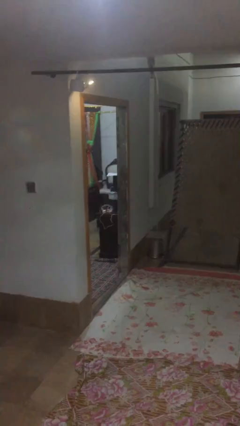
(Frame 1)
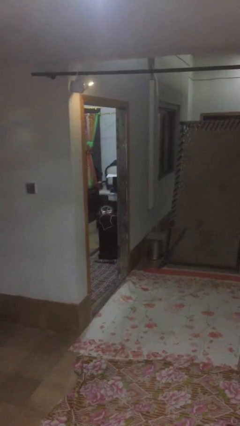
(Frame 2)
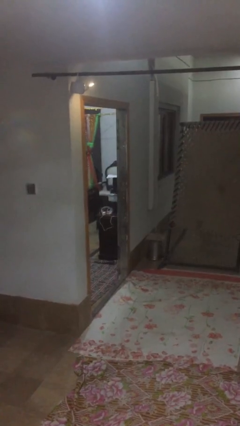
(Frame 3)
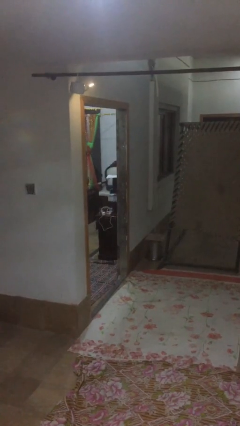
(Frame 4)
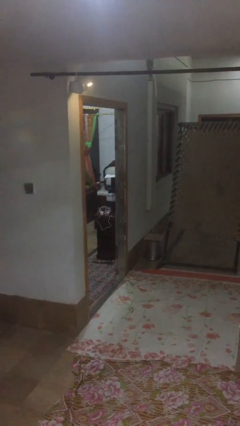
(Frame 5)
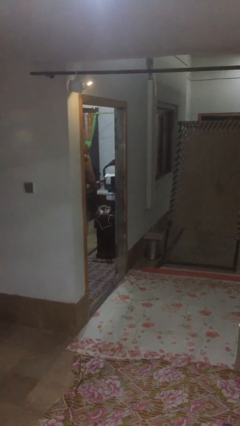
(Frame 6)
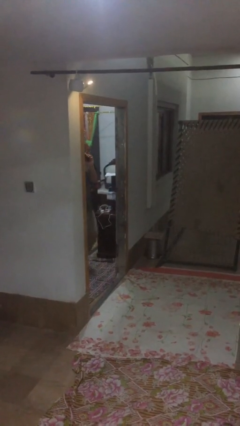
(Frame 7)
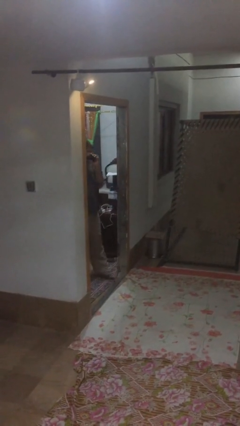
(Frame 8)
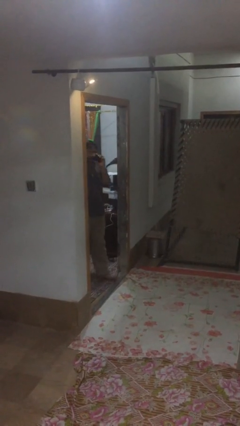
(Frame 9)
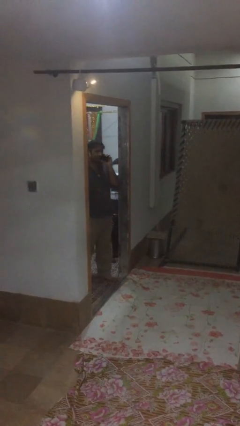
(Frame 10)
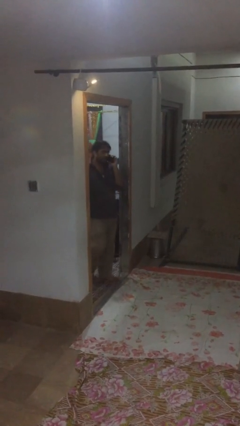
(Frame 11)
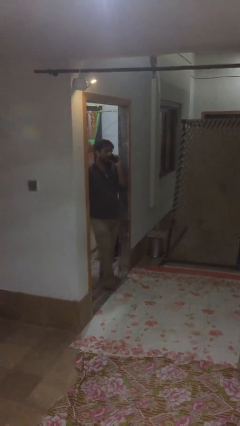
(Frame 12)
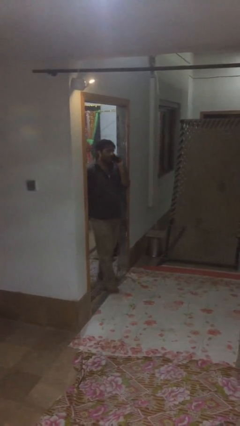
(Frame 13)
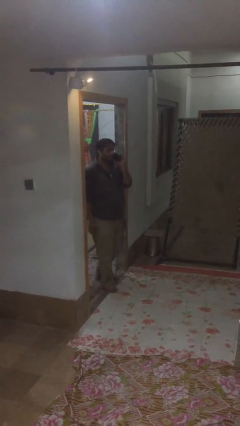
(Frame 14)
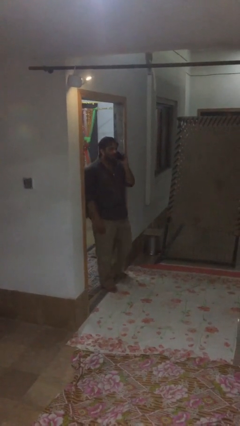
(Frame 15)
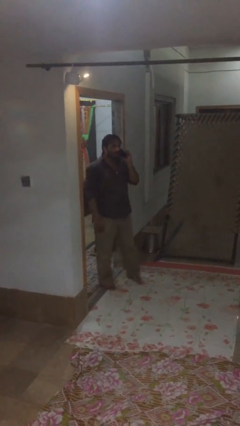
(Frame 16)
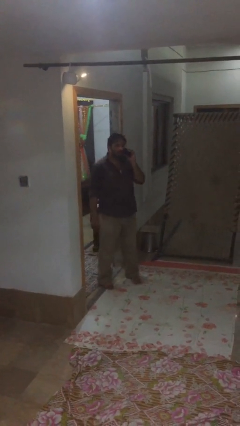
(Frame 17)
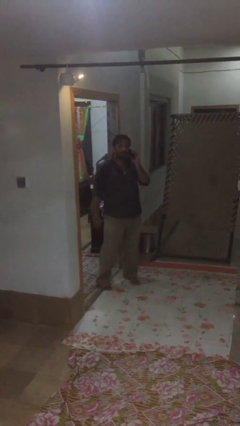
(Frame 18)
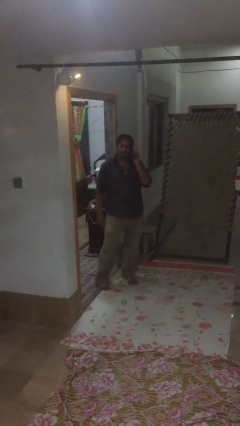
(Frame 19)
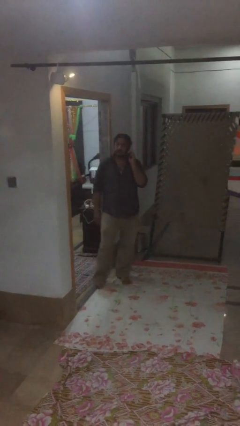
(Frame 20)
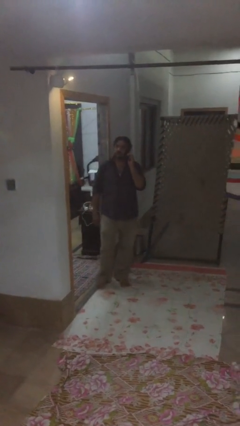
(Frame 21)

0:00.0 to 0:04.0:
person enters scene through structure

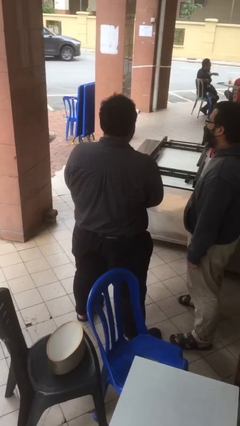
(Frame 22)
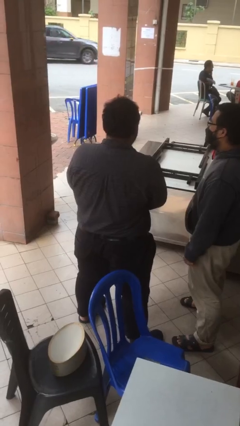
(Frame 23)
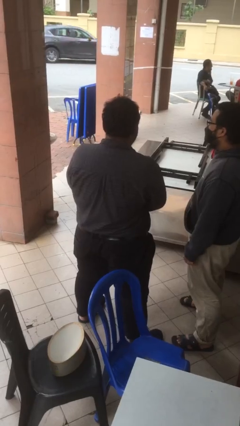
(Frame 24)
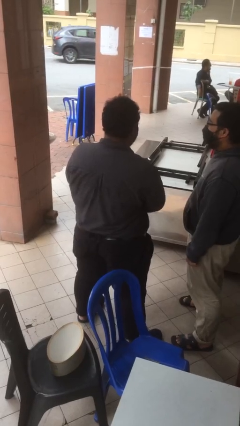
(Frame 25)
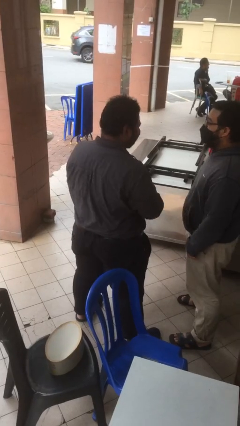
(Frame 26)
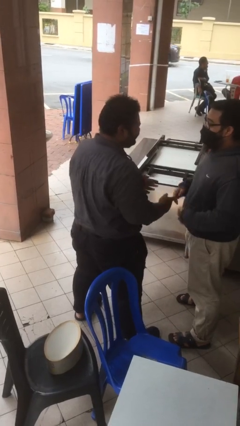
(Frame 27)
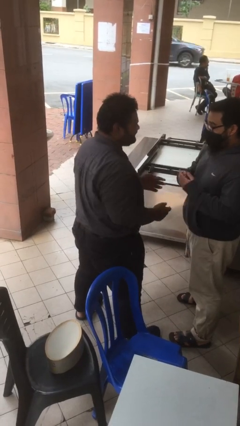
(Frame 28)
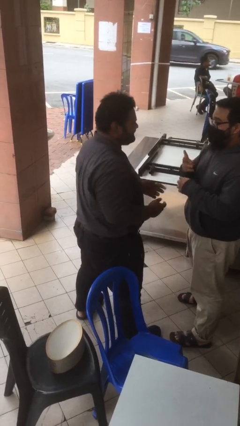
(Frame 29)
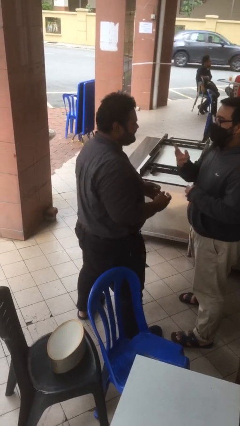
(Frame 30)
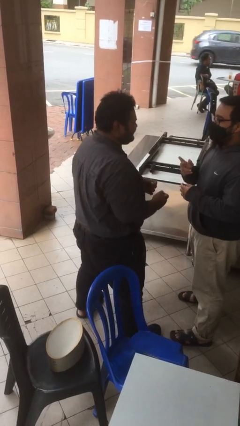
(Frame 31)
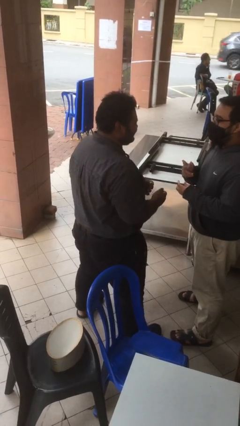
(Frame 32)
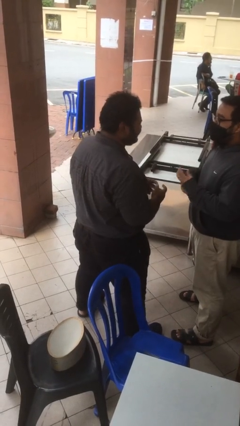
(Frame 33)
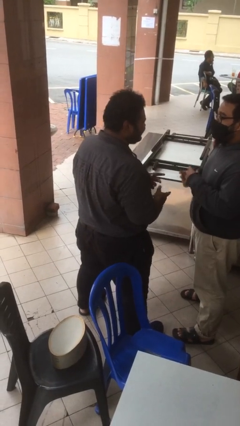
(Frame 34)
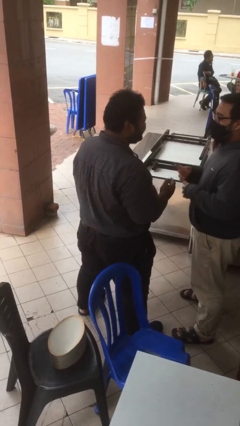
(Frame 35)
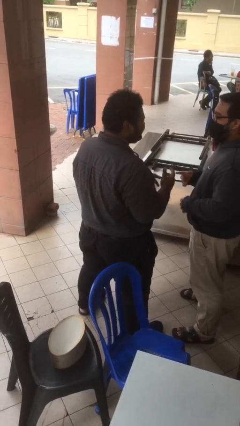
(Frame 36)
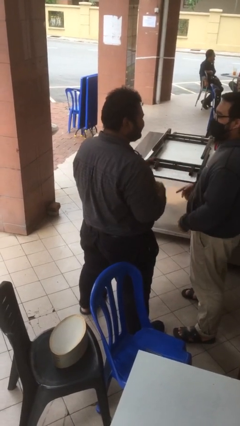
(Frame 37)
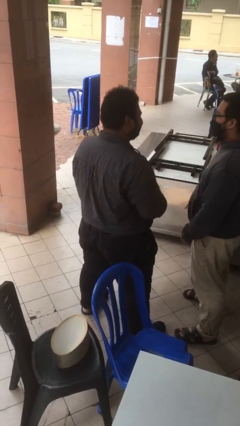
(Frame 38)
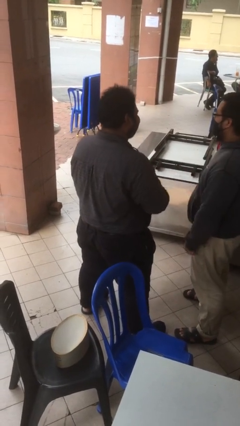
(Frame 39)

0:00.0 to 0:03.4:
person talks to person

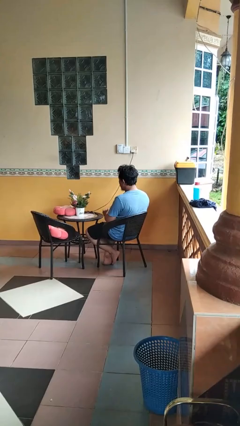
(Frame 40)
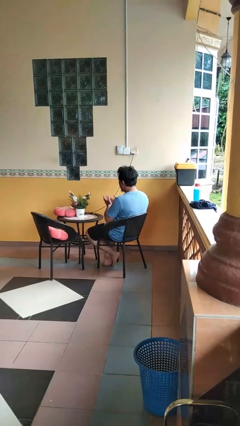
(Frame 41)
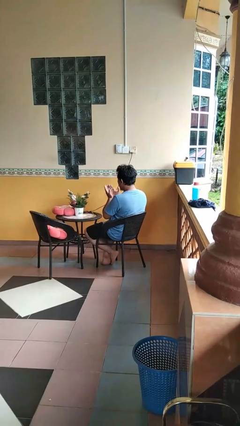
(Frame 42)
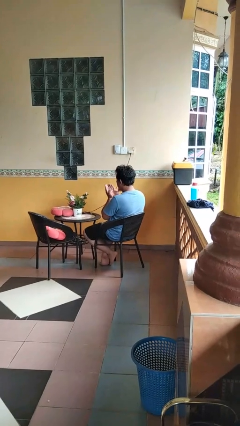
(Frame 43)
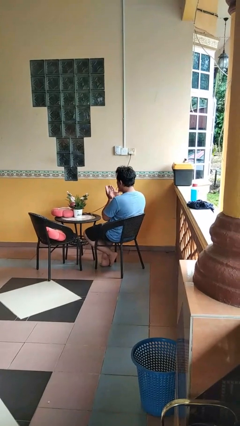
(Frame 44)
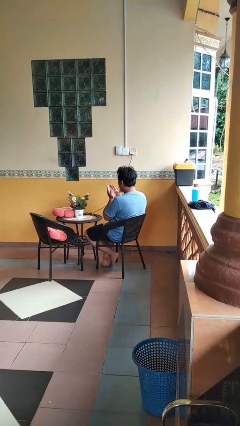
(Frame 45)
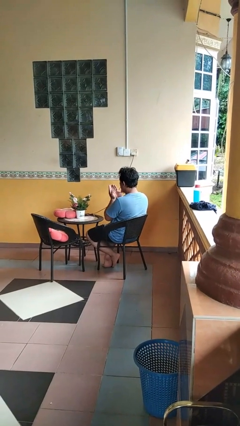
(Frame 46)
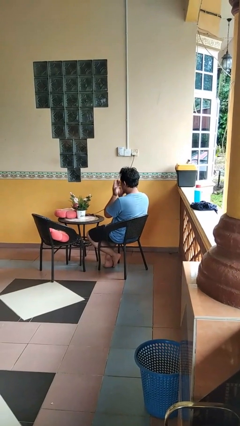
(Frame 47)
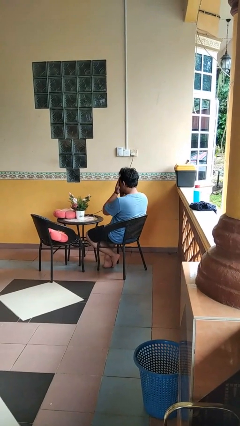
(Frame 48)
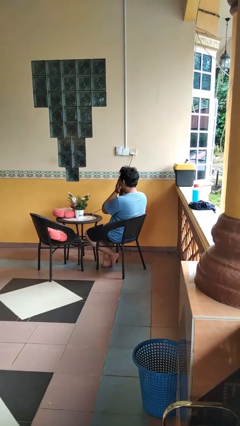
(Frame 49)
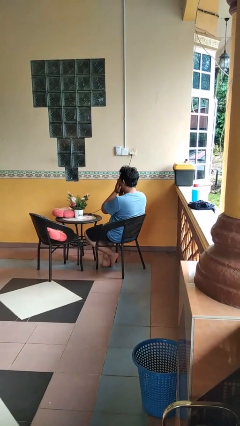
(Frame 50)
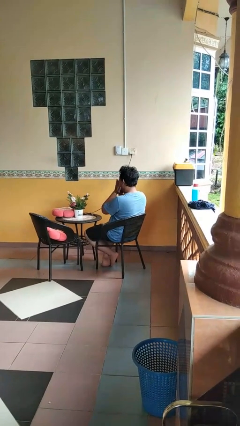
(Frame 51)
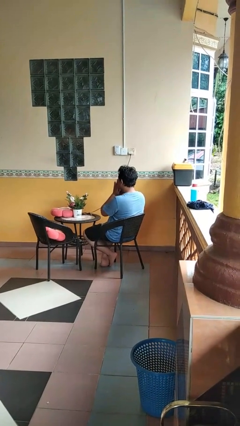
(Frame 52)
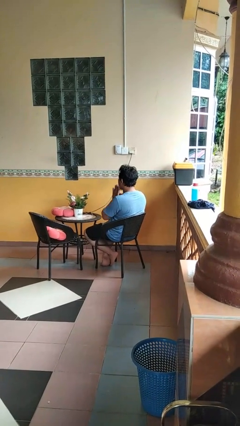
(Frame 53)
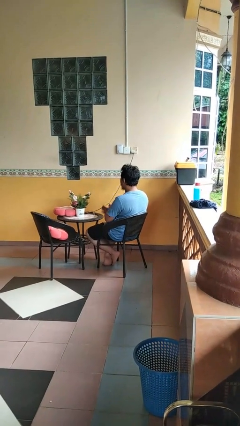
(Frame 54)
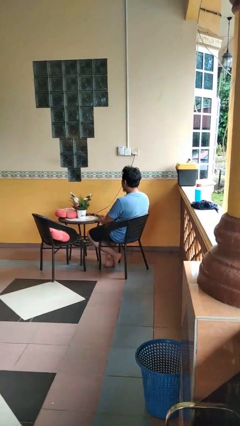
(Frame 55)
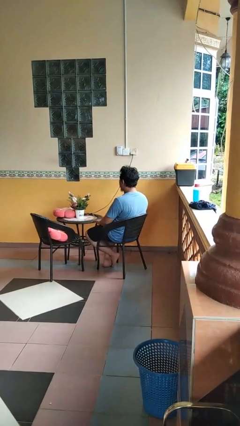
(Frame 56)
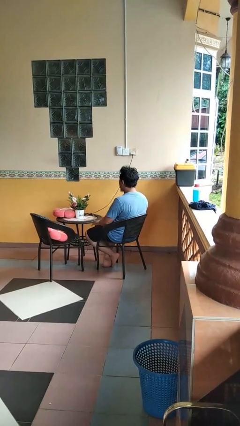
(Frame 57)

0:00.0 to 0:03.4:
person prays

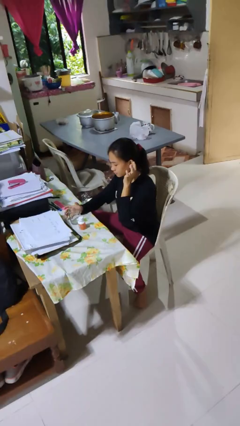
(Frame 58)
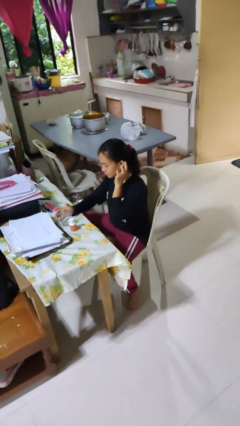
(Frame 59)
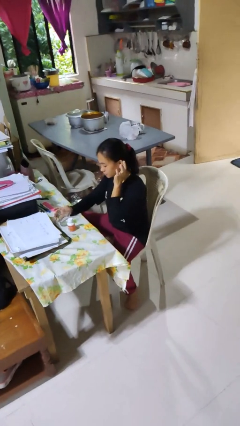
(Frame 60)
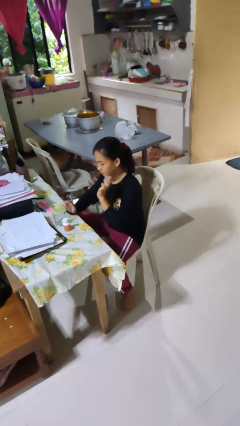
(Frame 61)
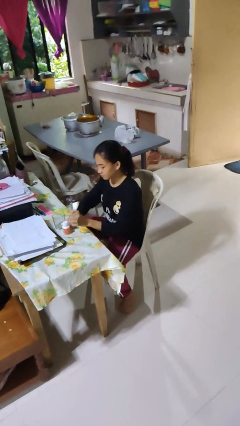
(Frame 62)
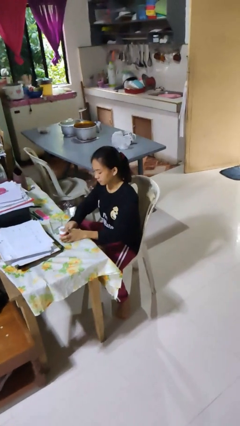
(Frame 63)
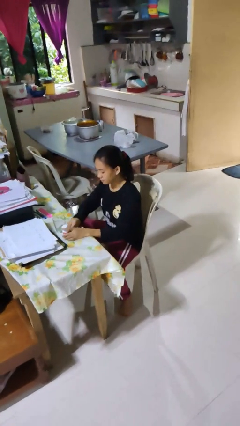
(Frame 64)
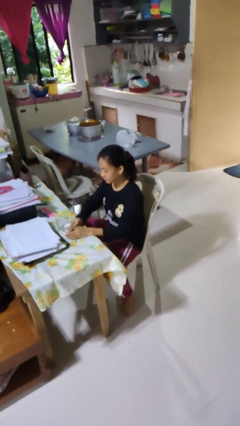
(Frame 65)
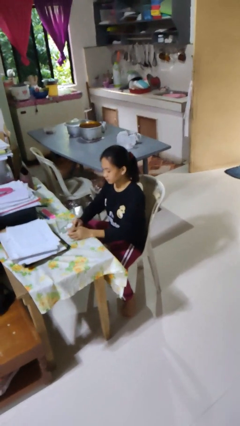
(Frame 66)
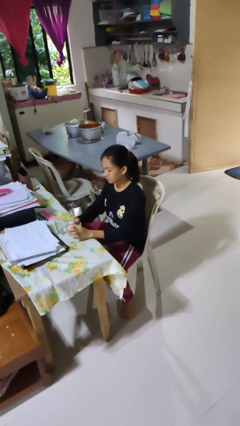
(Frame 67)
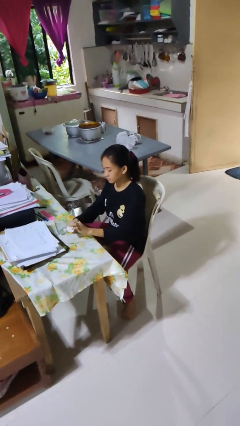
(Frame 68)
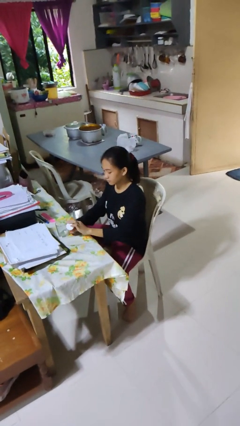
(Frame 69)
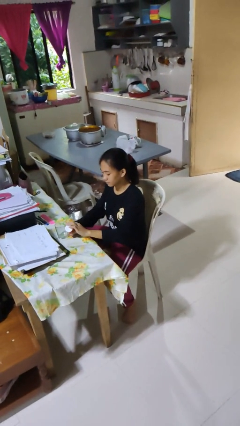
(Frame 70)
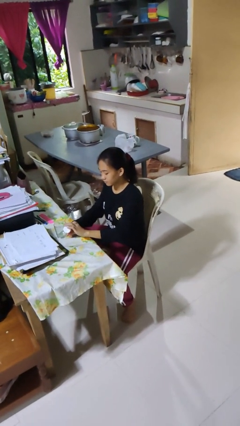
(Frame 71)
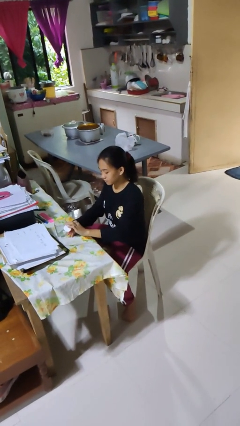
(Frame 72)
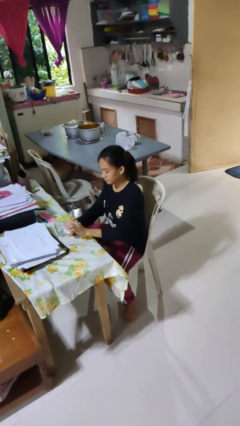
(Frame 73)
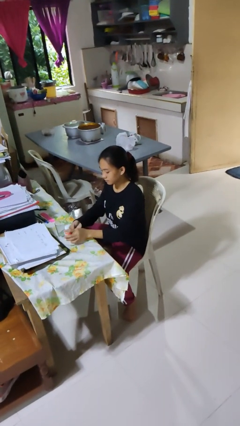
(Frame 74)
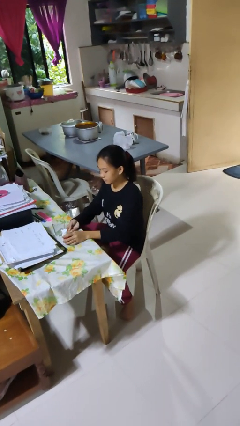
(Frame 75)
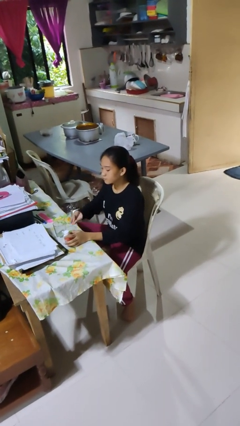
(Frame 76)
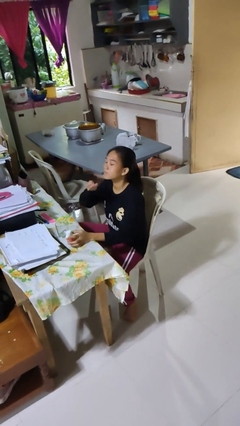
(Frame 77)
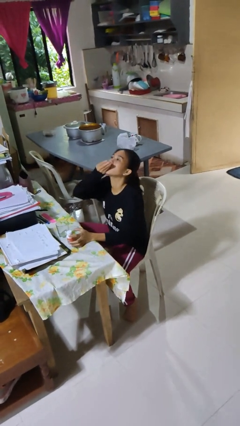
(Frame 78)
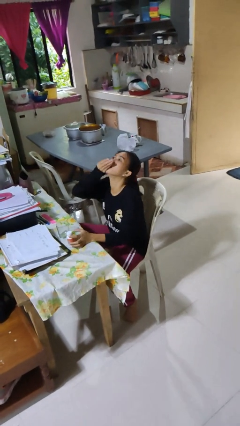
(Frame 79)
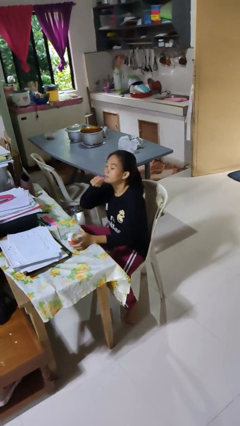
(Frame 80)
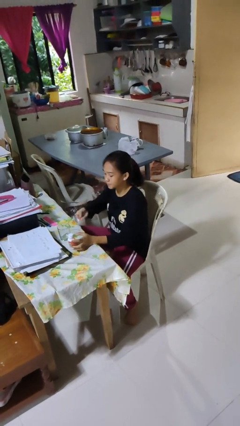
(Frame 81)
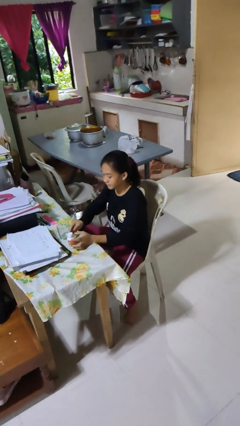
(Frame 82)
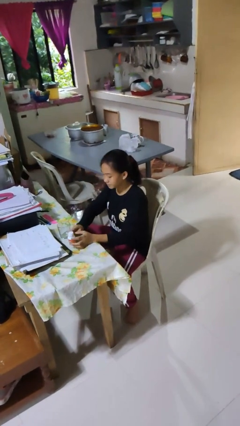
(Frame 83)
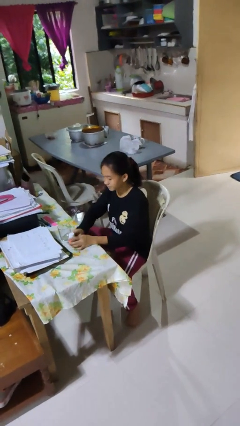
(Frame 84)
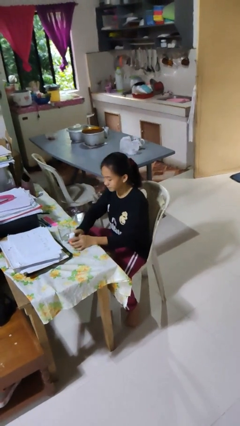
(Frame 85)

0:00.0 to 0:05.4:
person takes medicine pills

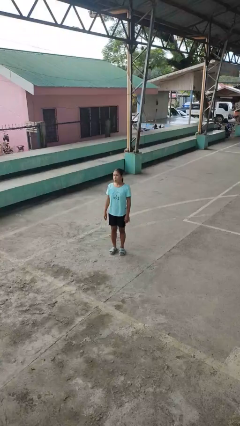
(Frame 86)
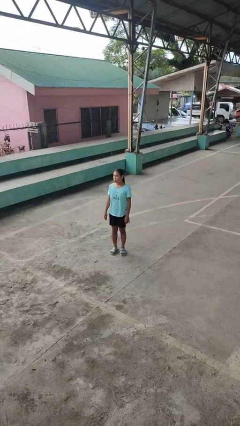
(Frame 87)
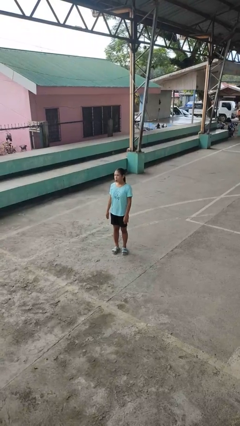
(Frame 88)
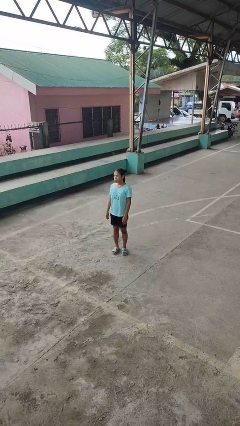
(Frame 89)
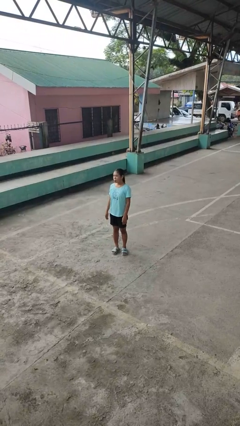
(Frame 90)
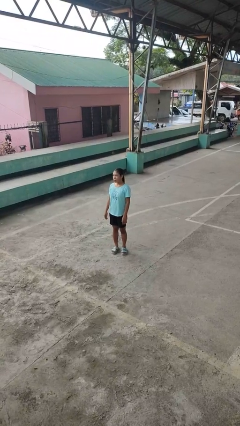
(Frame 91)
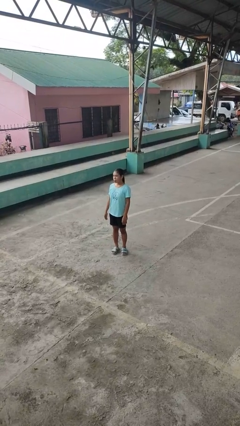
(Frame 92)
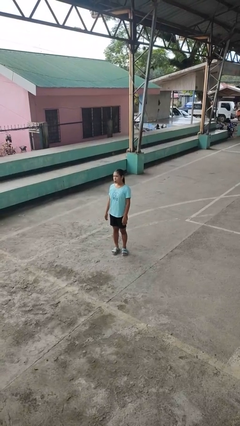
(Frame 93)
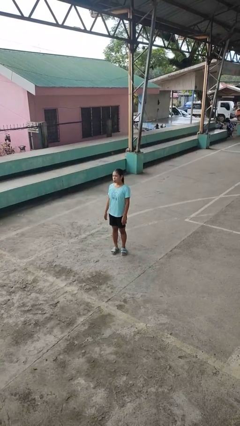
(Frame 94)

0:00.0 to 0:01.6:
person sticks out tongue
